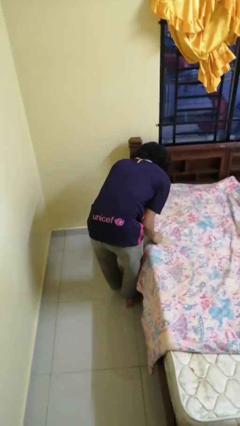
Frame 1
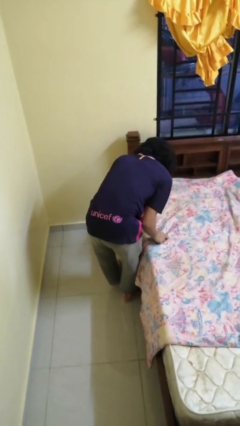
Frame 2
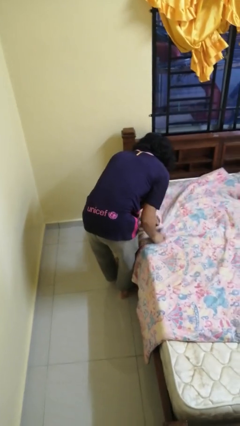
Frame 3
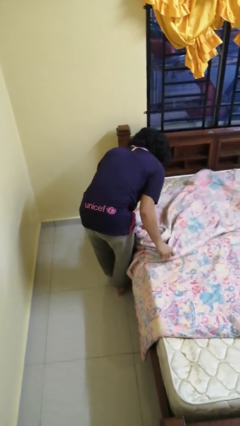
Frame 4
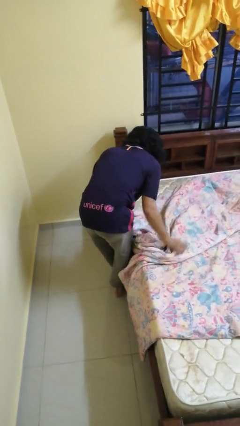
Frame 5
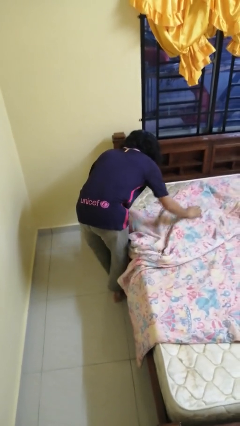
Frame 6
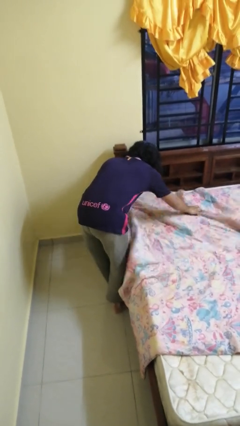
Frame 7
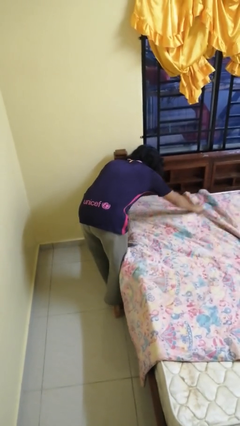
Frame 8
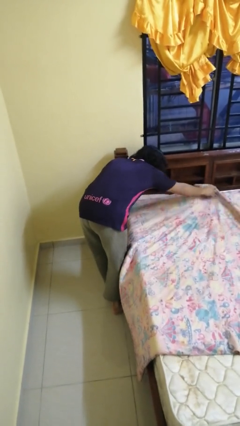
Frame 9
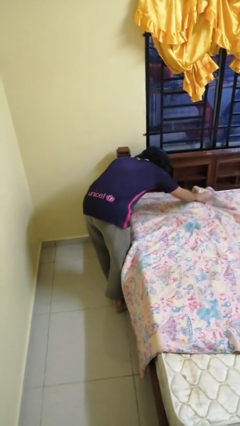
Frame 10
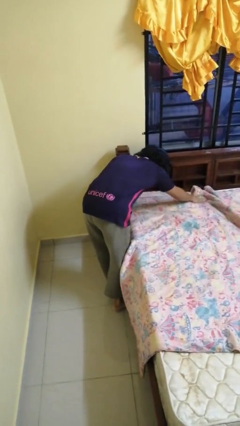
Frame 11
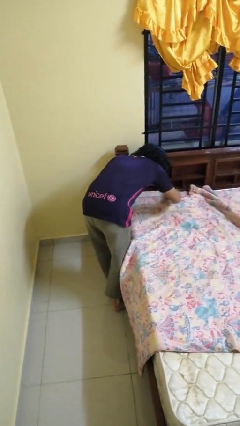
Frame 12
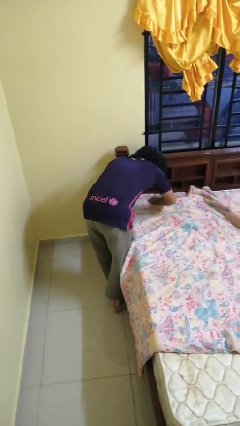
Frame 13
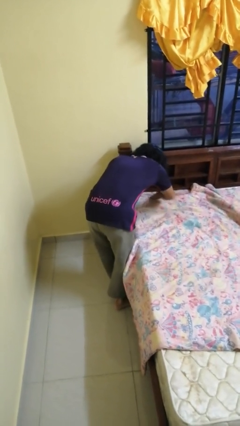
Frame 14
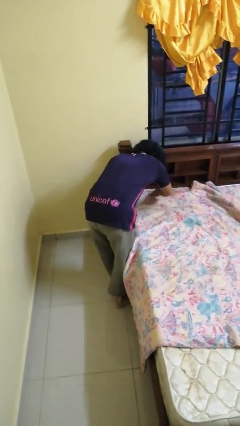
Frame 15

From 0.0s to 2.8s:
person makes bed

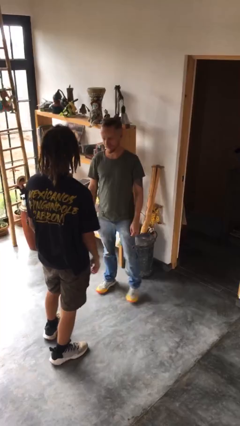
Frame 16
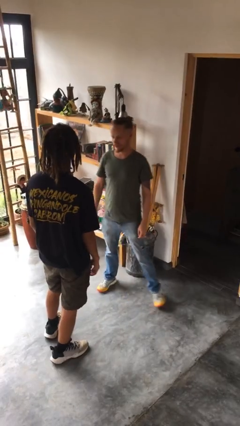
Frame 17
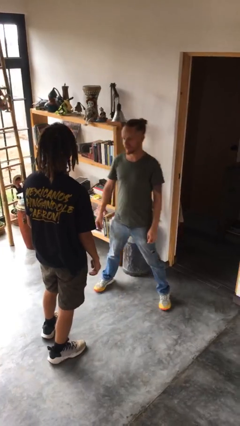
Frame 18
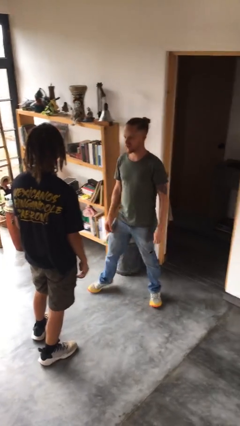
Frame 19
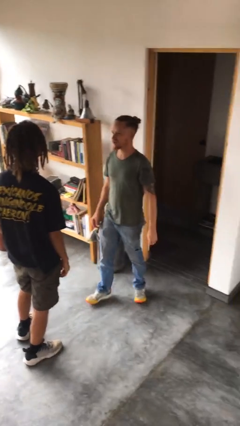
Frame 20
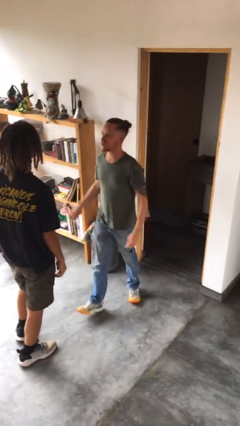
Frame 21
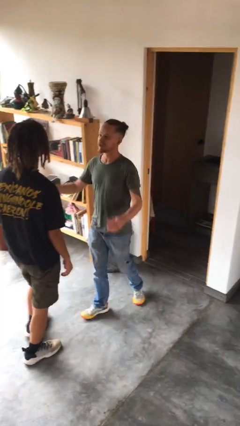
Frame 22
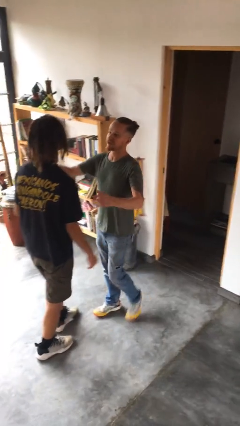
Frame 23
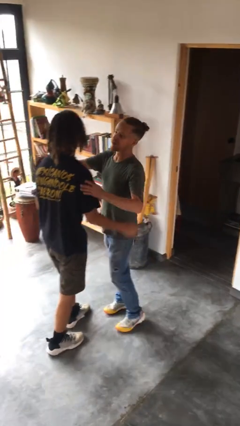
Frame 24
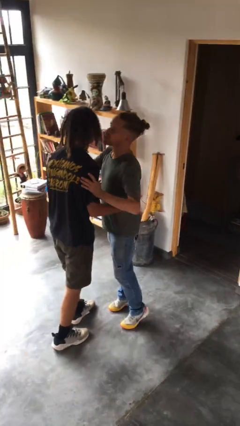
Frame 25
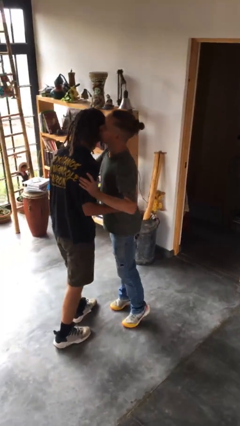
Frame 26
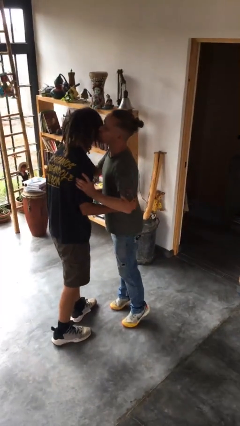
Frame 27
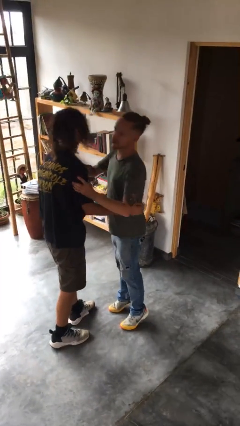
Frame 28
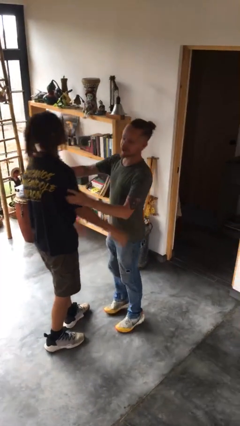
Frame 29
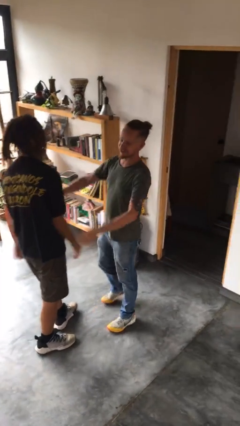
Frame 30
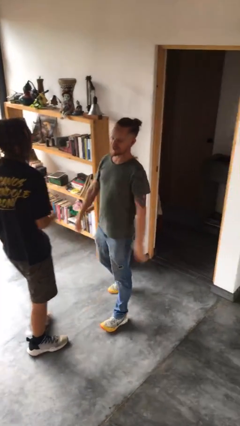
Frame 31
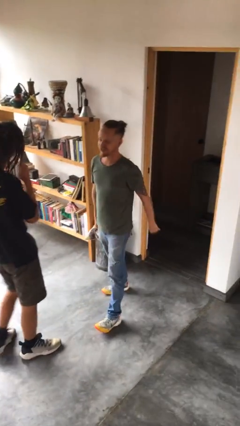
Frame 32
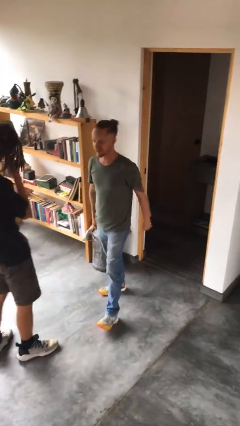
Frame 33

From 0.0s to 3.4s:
person kisses cheek of person

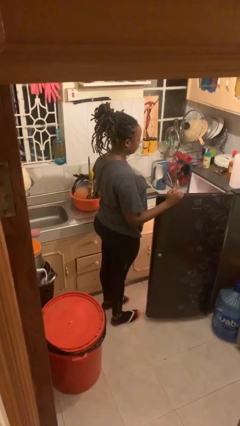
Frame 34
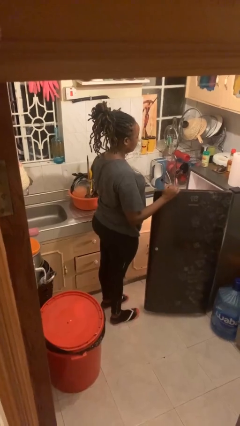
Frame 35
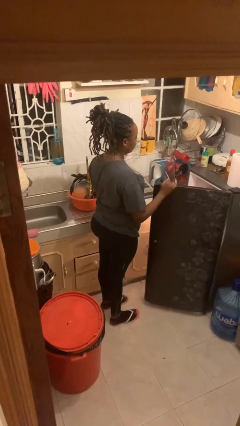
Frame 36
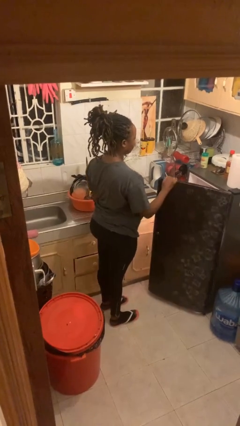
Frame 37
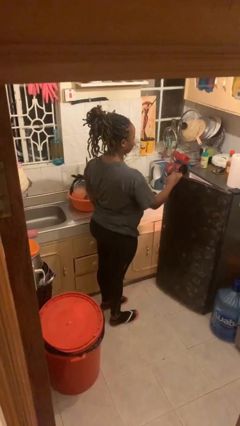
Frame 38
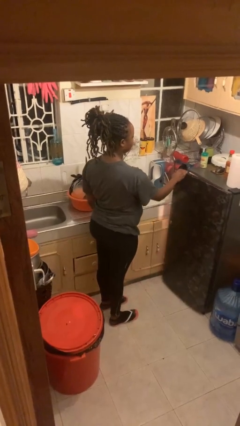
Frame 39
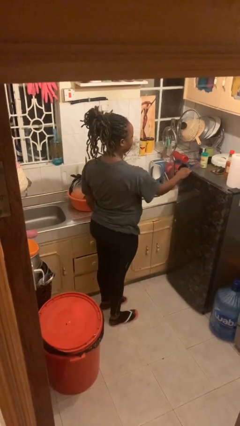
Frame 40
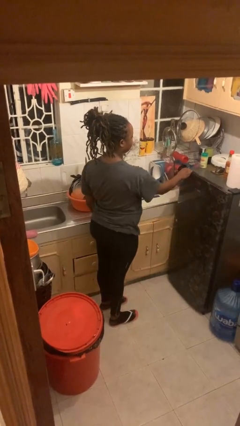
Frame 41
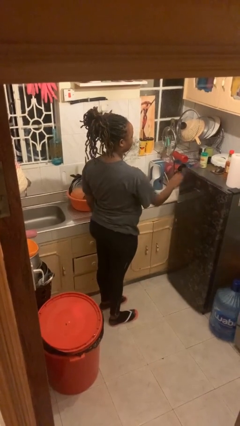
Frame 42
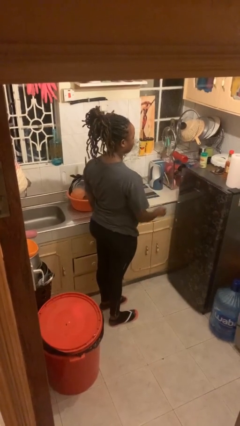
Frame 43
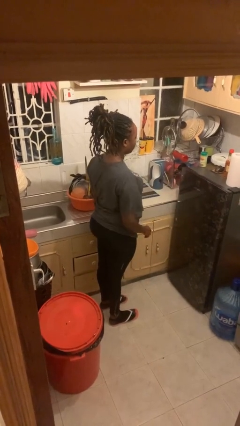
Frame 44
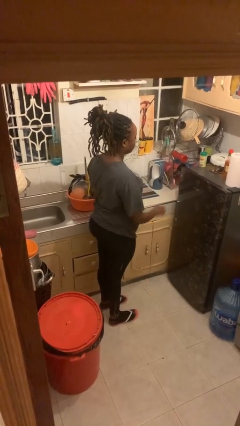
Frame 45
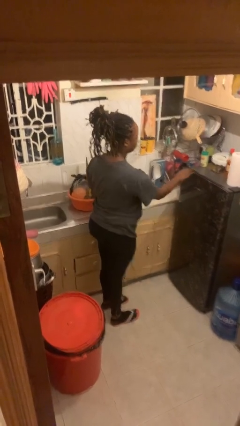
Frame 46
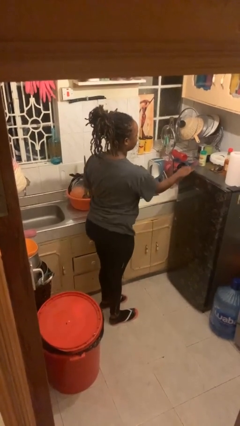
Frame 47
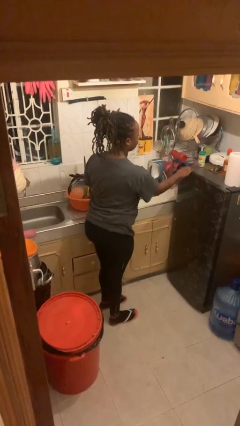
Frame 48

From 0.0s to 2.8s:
person closes refrigerator

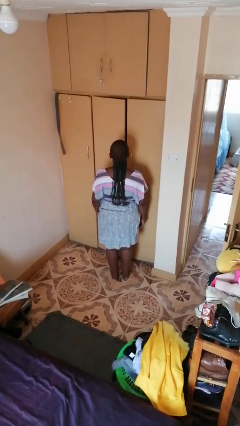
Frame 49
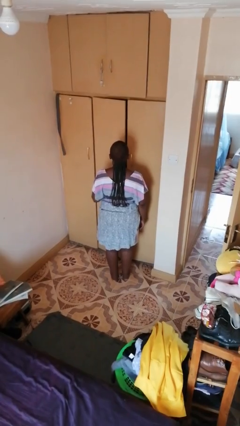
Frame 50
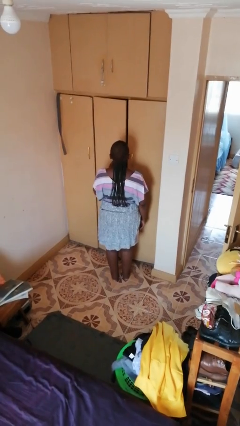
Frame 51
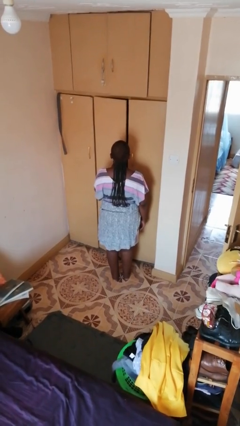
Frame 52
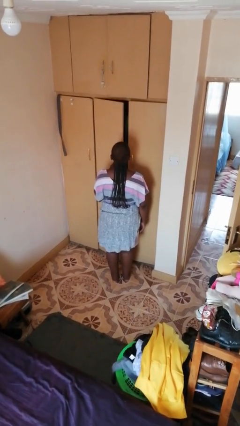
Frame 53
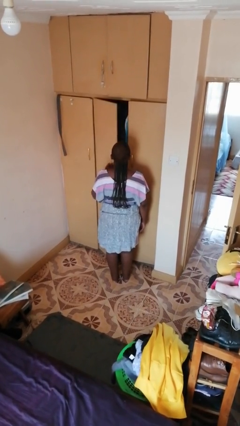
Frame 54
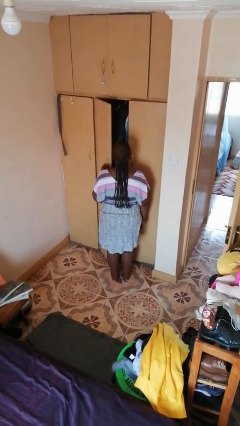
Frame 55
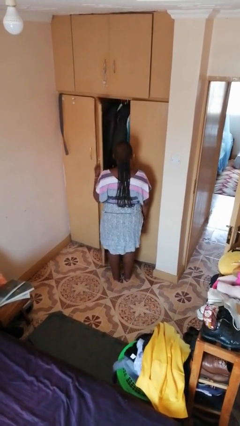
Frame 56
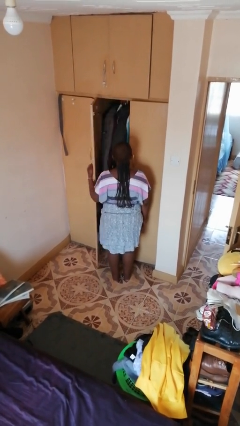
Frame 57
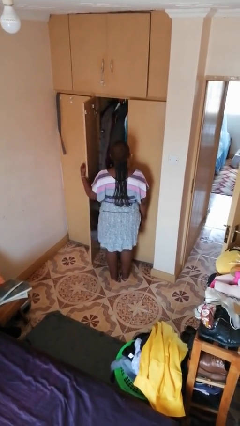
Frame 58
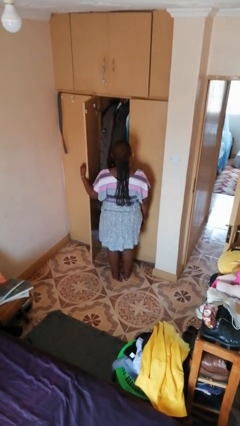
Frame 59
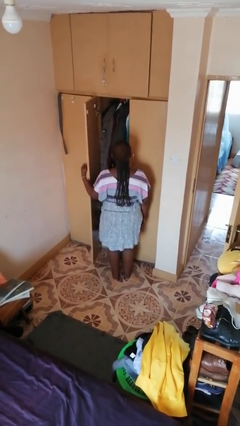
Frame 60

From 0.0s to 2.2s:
person opens closet door

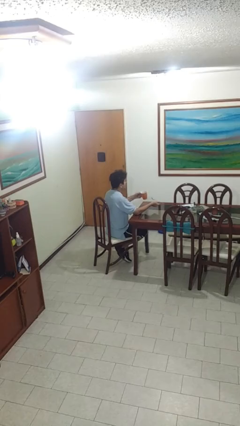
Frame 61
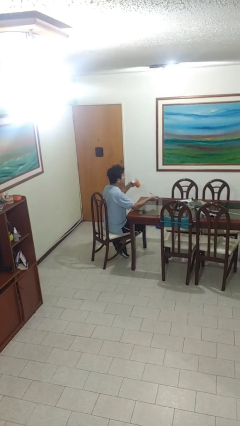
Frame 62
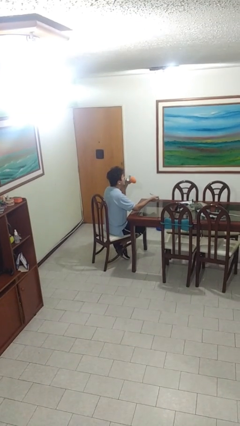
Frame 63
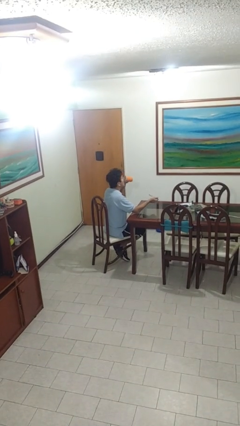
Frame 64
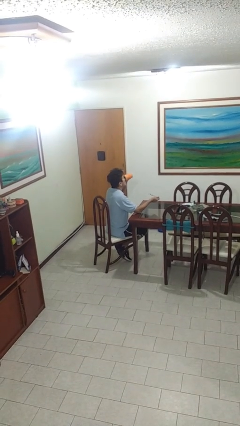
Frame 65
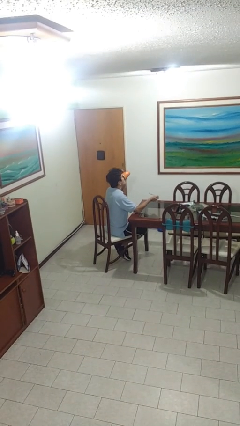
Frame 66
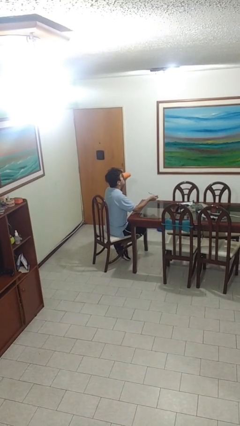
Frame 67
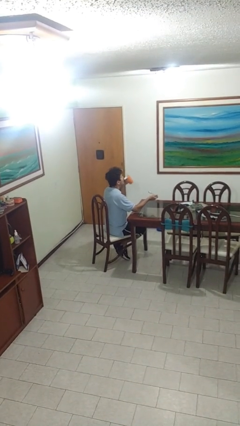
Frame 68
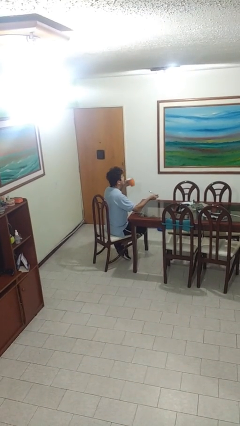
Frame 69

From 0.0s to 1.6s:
person drinks from mug

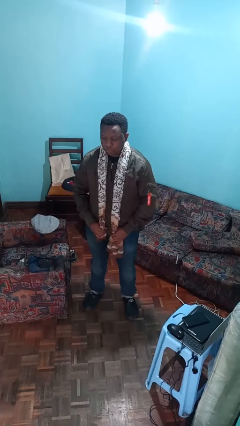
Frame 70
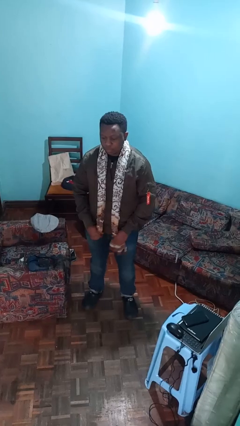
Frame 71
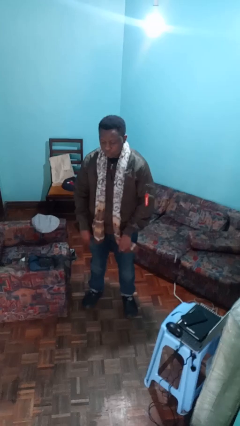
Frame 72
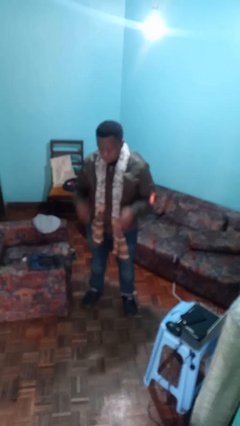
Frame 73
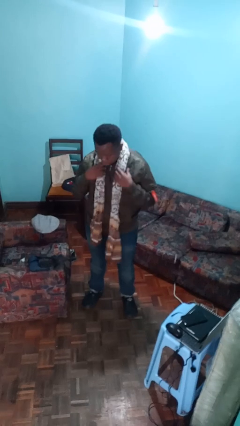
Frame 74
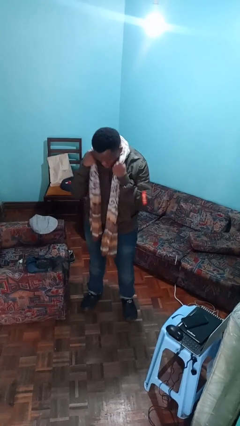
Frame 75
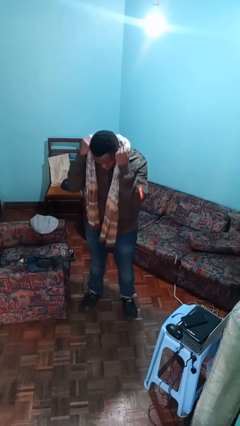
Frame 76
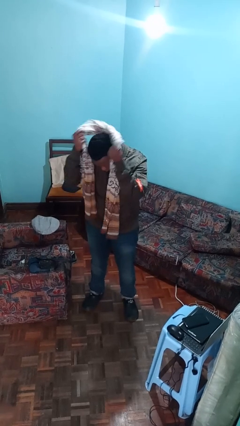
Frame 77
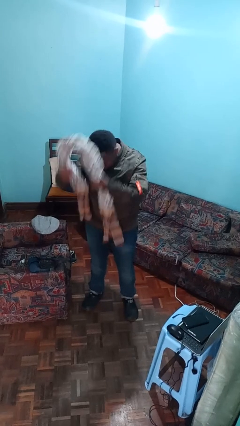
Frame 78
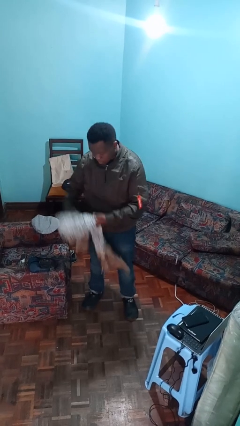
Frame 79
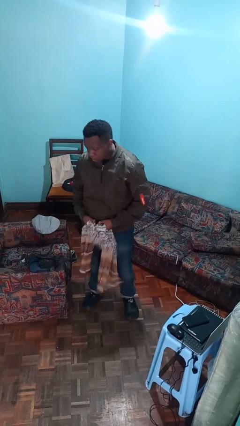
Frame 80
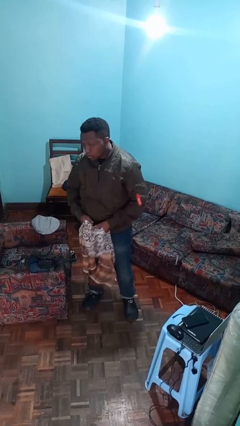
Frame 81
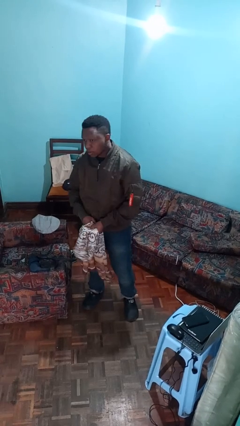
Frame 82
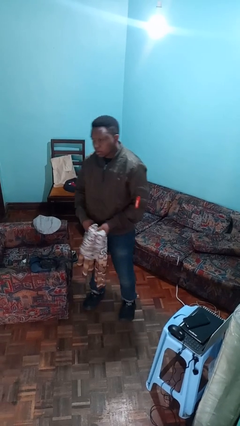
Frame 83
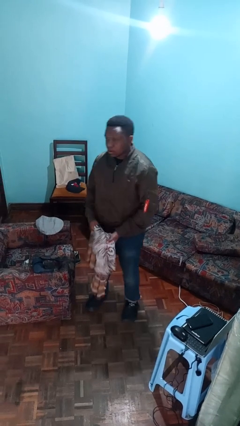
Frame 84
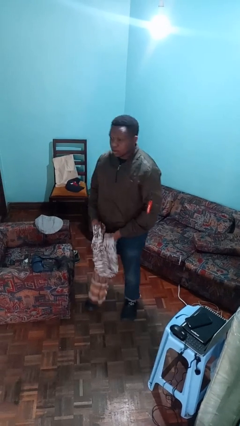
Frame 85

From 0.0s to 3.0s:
person takes off scarf

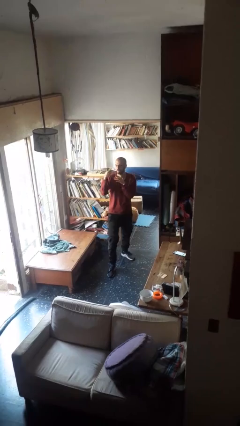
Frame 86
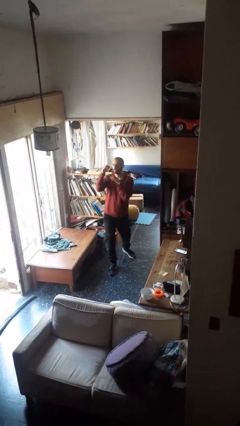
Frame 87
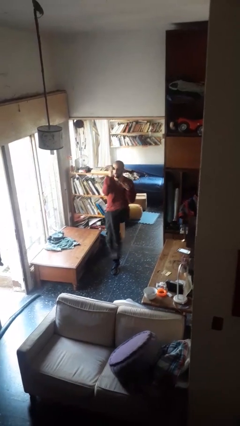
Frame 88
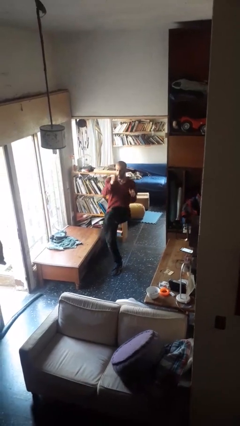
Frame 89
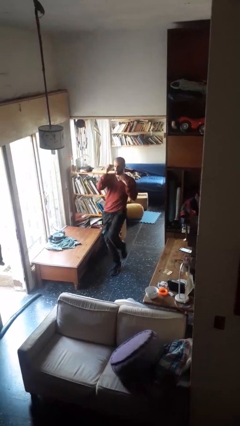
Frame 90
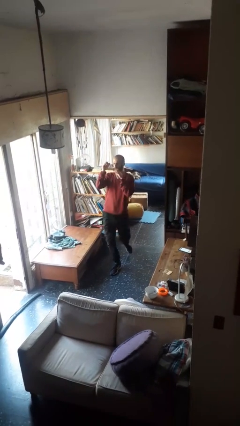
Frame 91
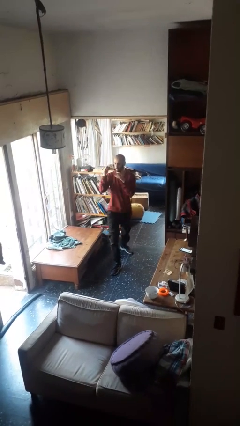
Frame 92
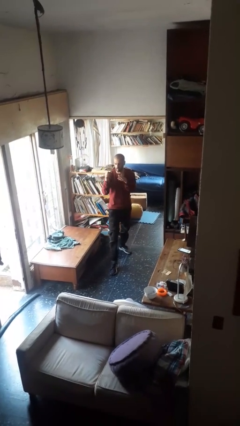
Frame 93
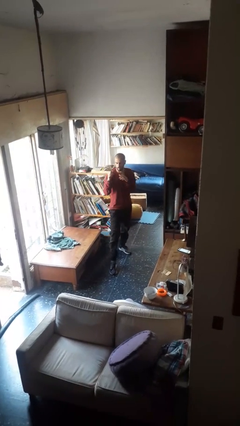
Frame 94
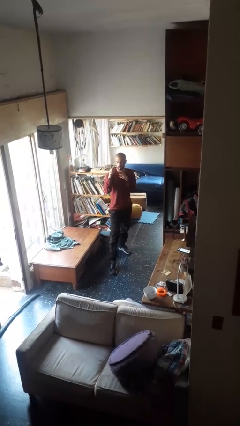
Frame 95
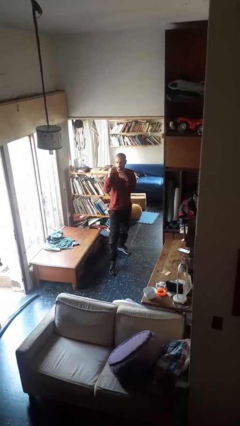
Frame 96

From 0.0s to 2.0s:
person karate kicks
